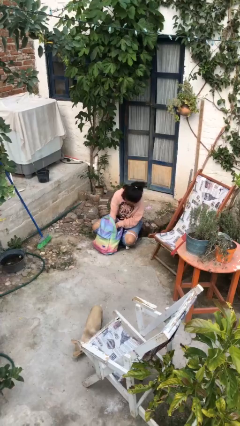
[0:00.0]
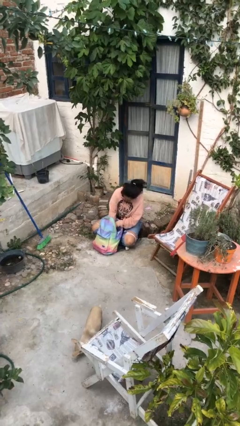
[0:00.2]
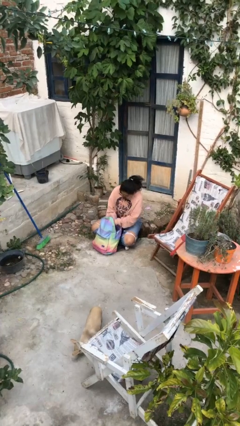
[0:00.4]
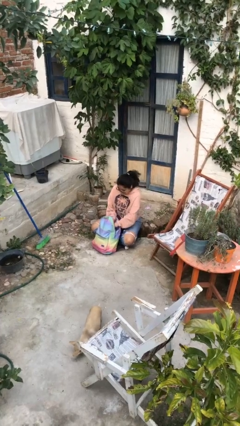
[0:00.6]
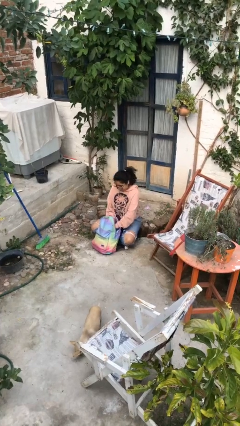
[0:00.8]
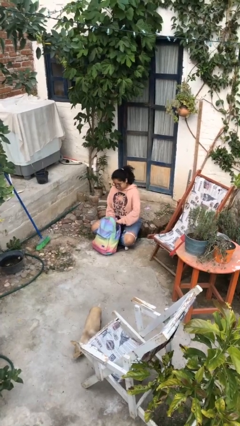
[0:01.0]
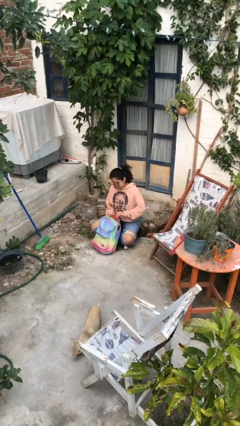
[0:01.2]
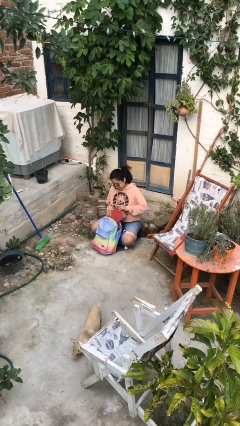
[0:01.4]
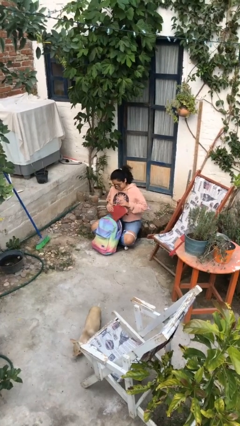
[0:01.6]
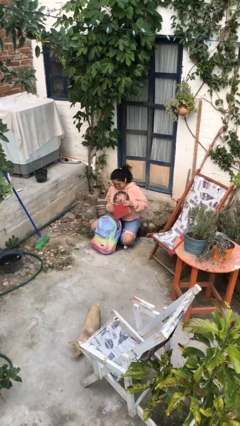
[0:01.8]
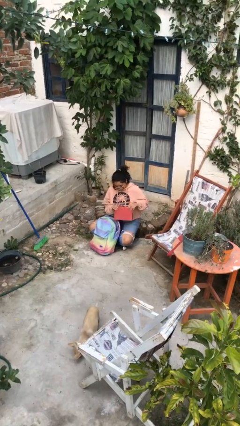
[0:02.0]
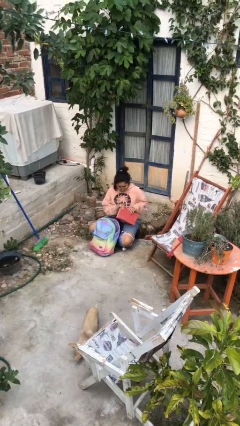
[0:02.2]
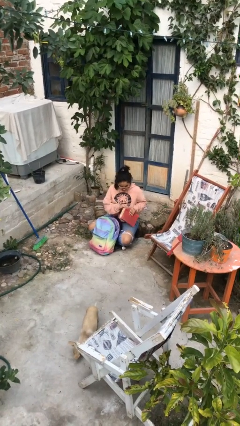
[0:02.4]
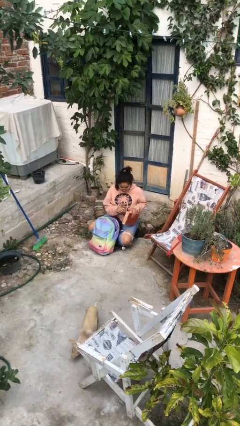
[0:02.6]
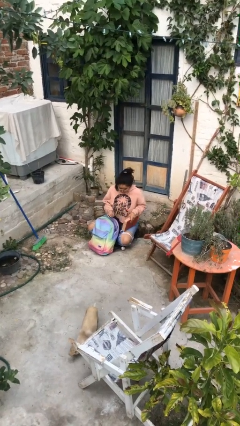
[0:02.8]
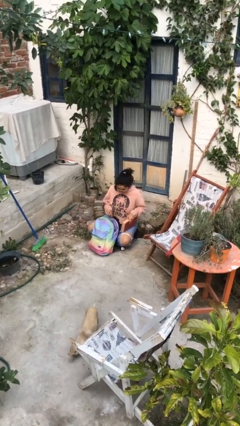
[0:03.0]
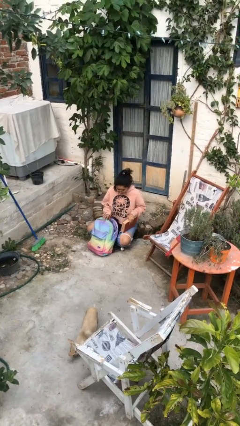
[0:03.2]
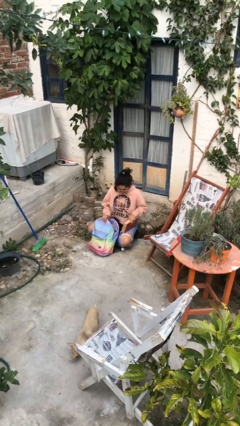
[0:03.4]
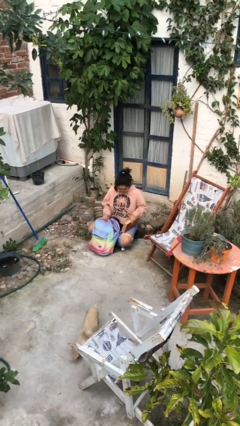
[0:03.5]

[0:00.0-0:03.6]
person takes object from backpack

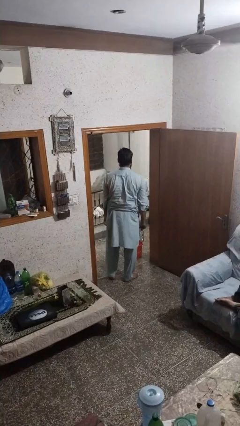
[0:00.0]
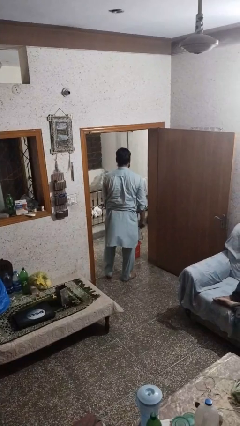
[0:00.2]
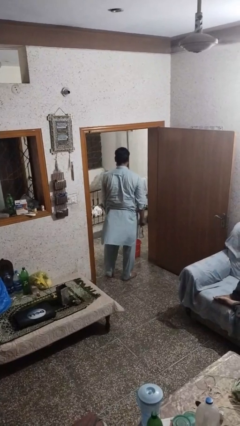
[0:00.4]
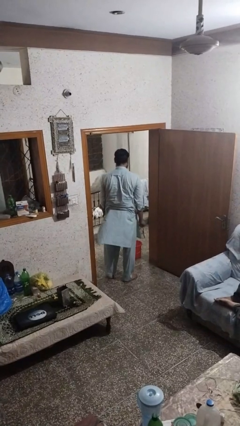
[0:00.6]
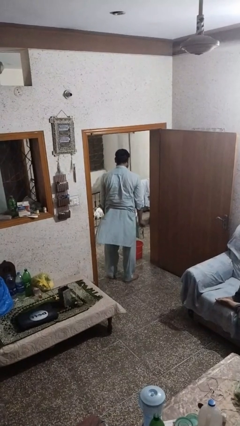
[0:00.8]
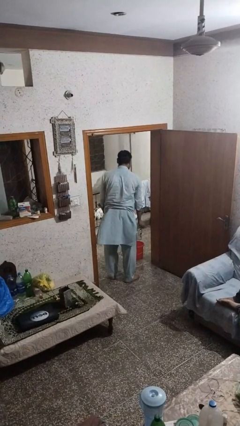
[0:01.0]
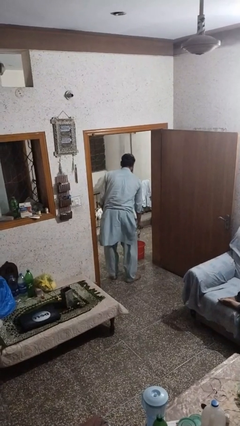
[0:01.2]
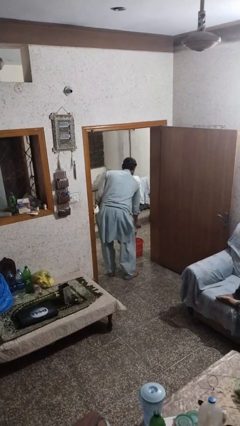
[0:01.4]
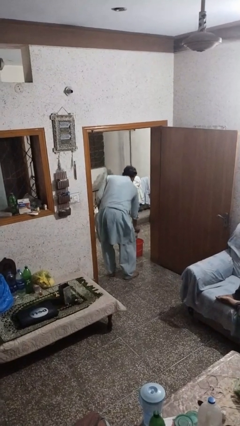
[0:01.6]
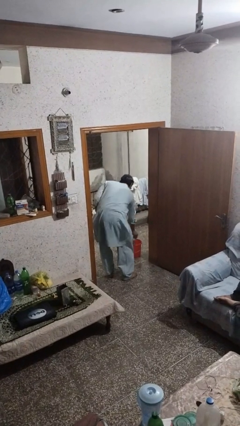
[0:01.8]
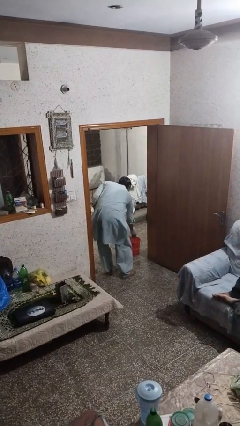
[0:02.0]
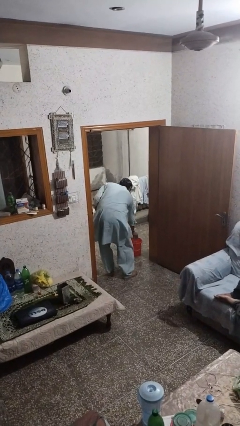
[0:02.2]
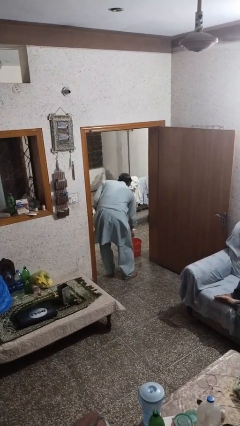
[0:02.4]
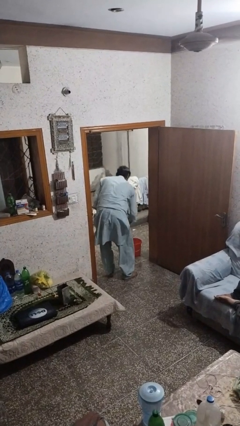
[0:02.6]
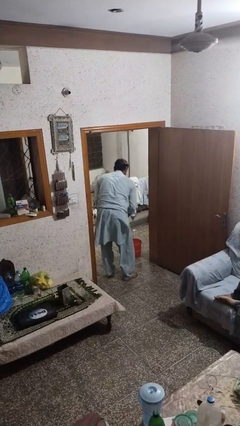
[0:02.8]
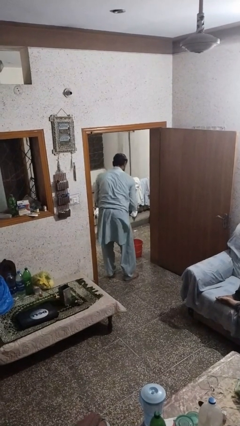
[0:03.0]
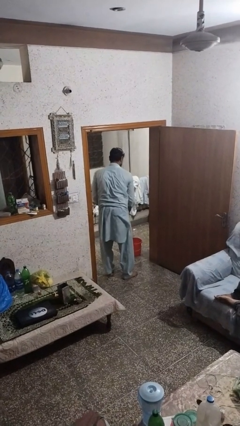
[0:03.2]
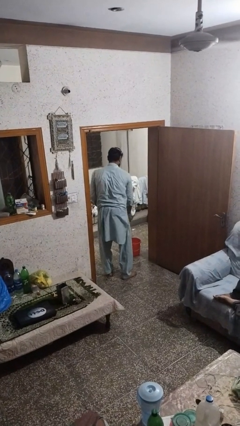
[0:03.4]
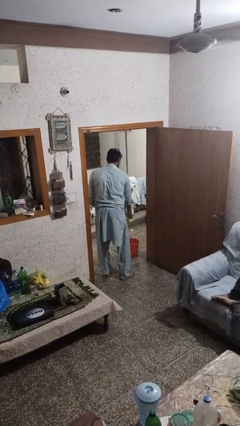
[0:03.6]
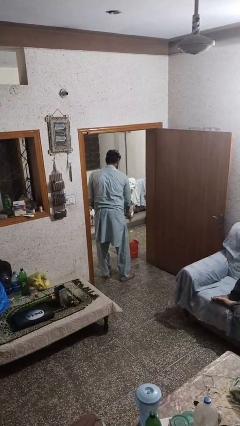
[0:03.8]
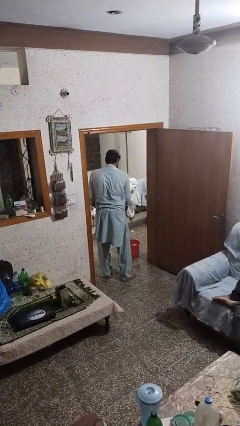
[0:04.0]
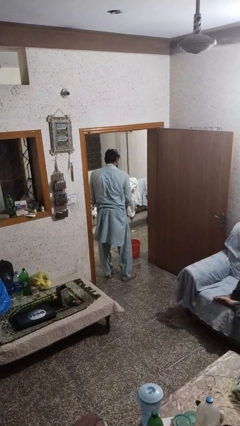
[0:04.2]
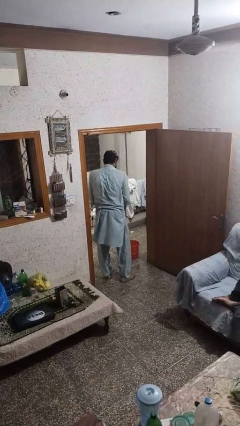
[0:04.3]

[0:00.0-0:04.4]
person discards trash

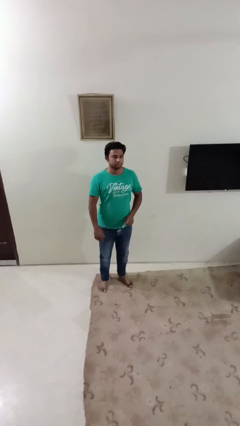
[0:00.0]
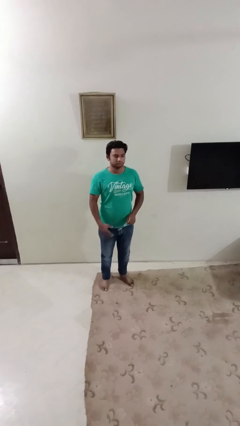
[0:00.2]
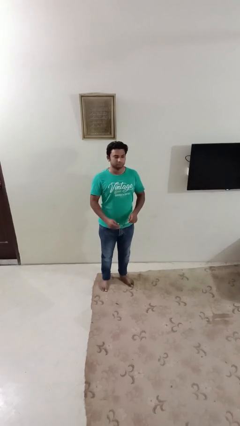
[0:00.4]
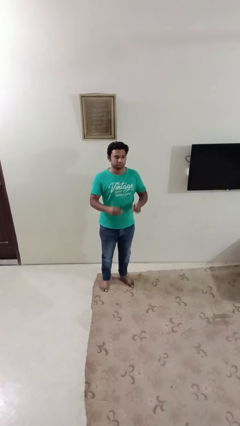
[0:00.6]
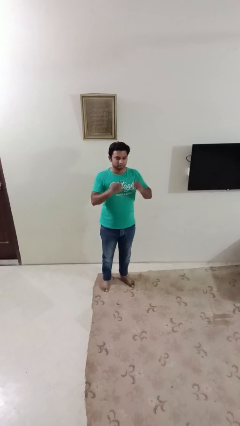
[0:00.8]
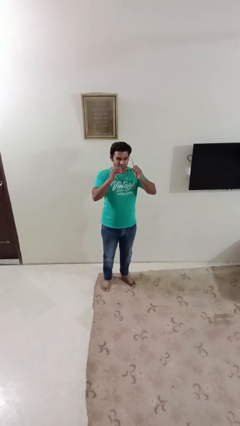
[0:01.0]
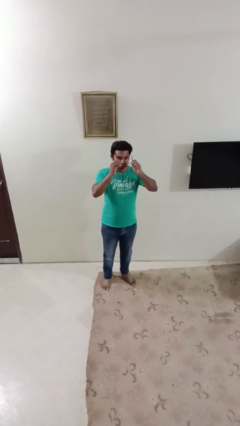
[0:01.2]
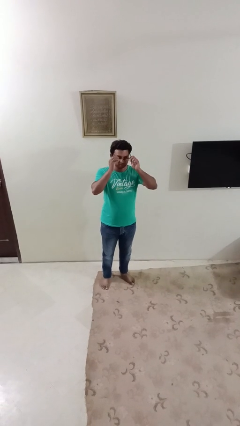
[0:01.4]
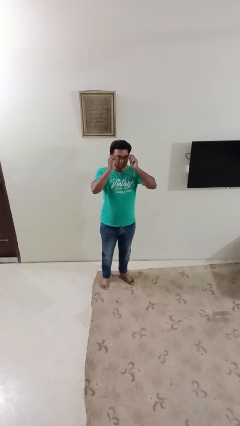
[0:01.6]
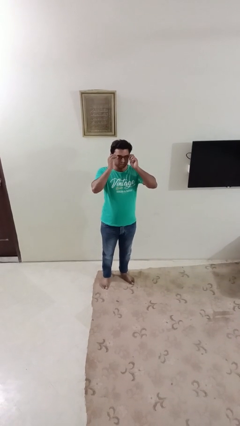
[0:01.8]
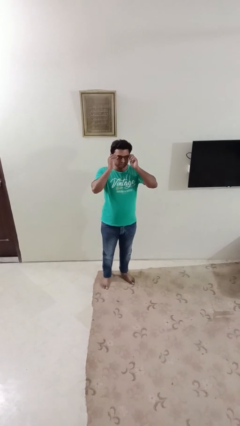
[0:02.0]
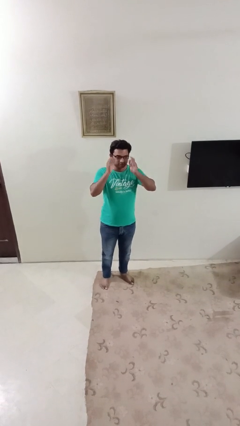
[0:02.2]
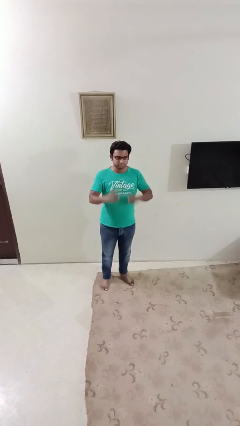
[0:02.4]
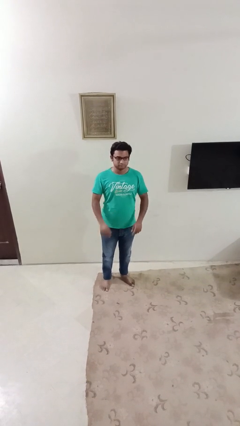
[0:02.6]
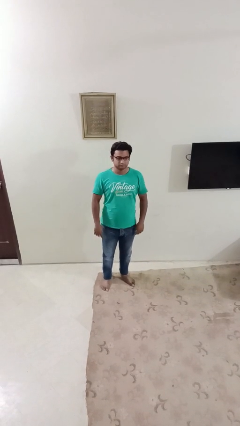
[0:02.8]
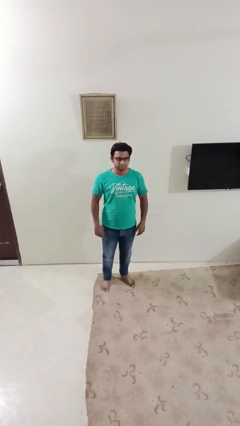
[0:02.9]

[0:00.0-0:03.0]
person puts on glasses

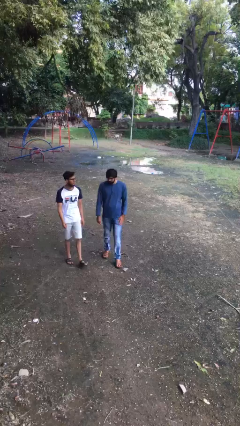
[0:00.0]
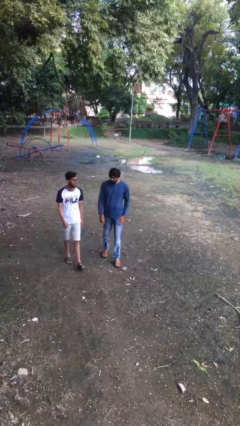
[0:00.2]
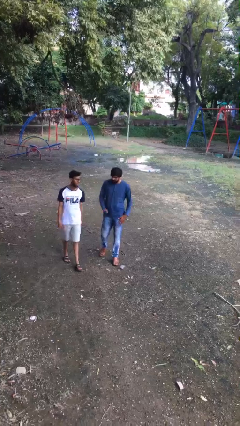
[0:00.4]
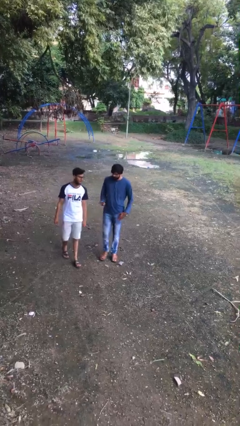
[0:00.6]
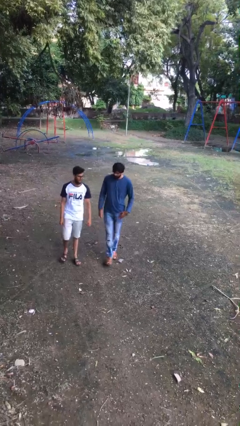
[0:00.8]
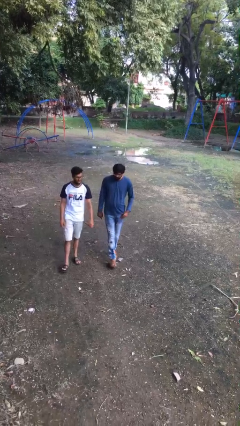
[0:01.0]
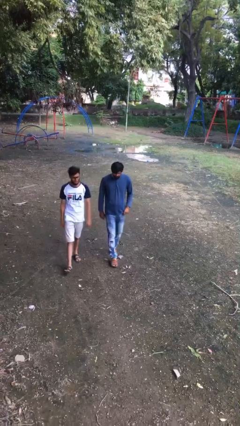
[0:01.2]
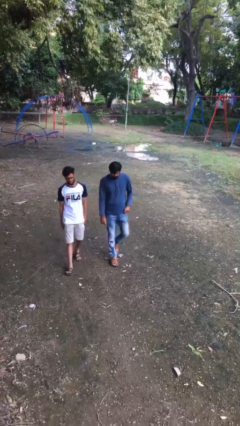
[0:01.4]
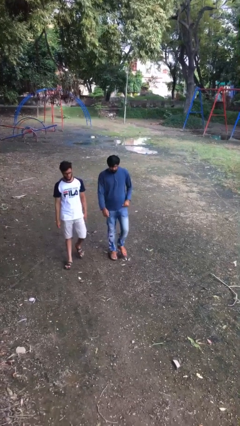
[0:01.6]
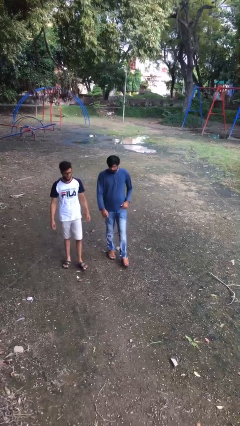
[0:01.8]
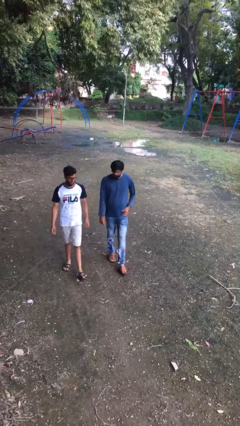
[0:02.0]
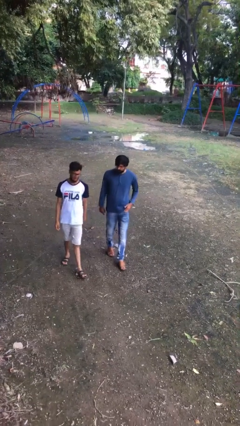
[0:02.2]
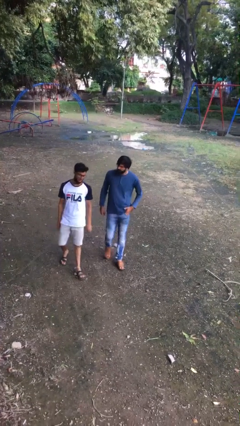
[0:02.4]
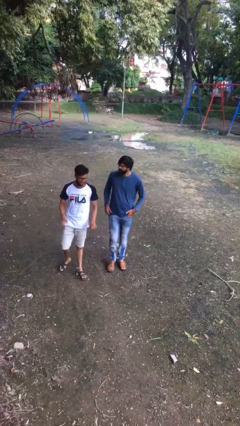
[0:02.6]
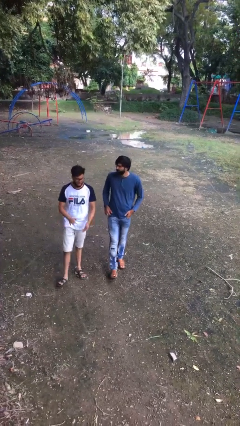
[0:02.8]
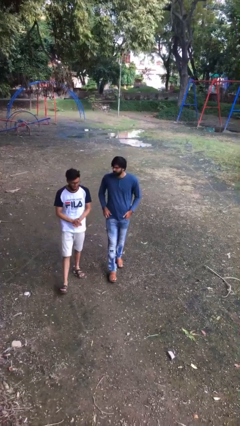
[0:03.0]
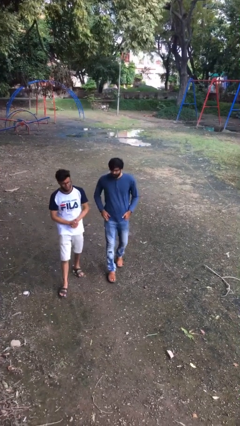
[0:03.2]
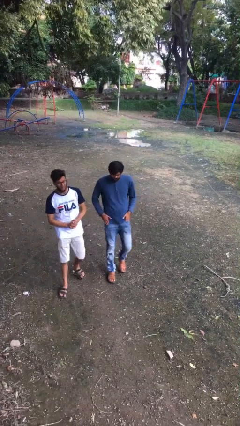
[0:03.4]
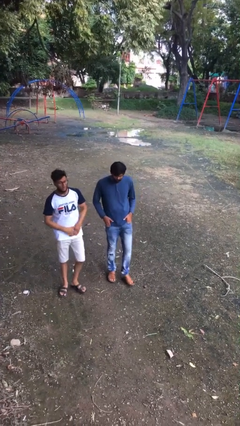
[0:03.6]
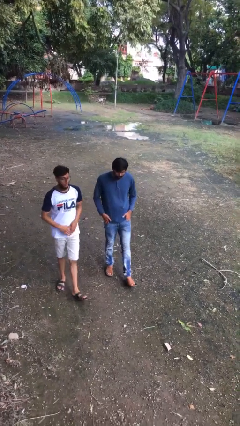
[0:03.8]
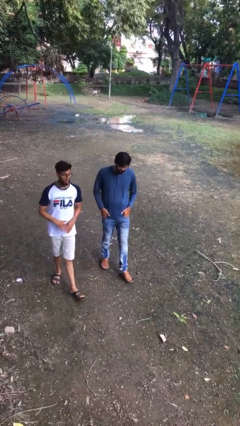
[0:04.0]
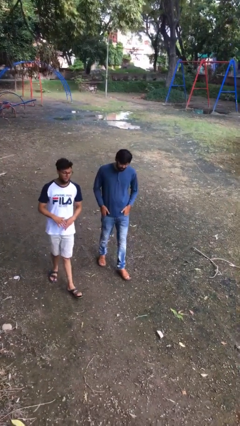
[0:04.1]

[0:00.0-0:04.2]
person talks to person

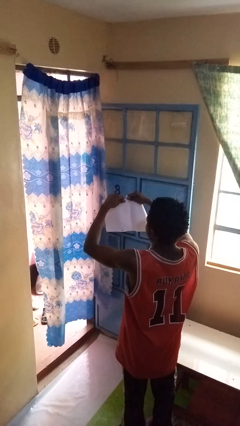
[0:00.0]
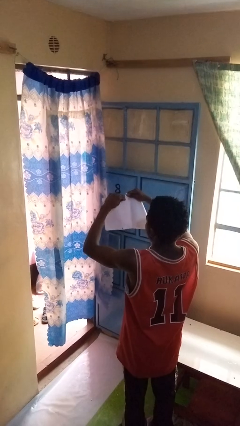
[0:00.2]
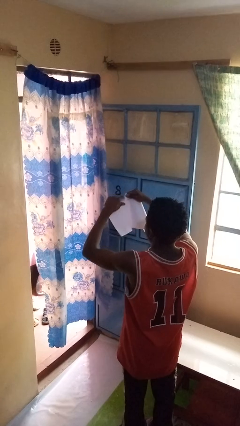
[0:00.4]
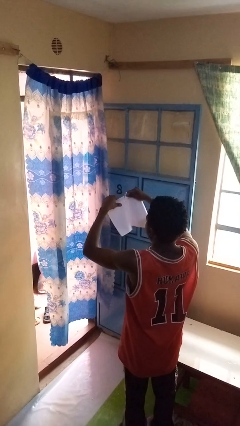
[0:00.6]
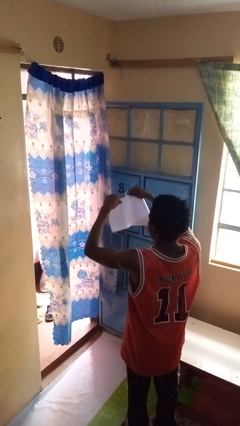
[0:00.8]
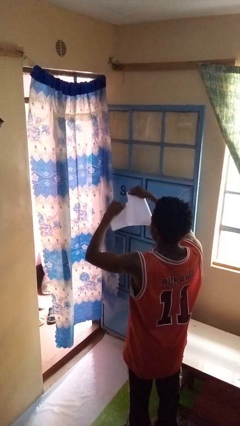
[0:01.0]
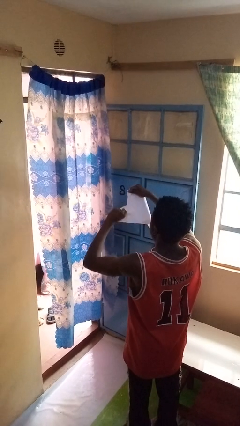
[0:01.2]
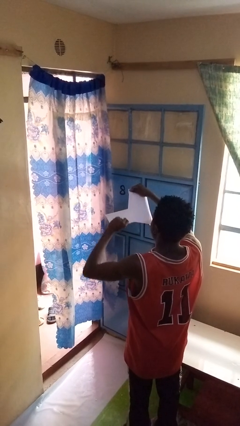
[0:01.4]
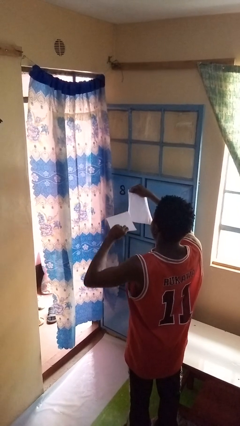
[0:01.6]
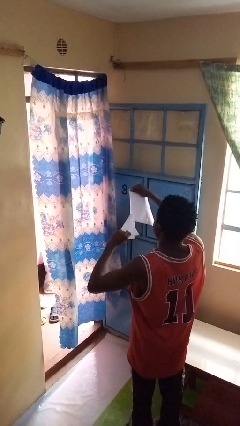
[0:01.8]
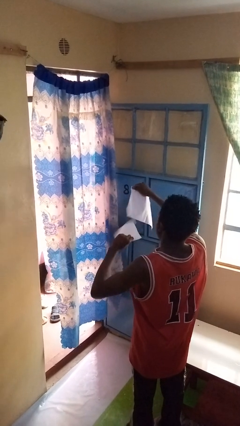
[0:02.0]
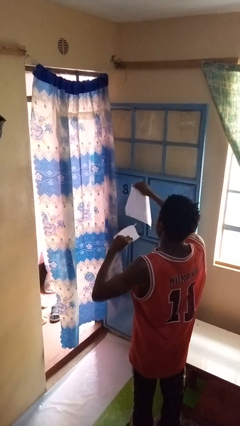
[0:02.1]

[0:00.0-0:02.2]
person tears paper
